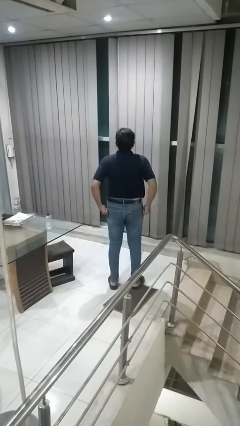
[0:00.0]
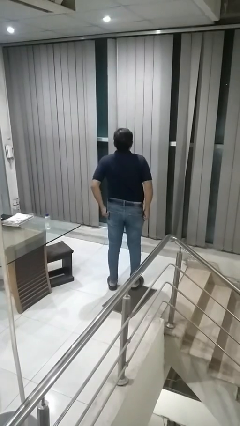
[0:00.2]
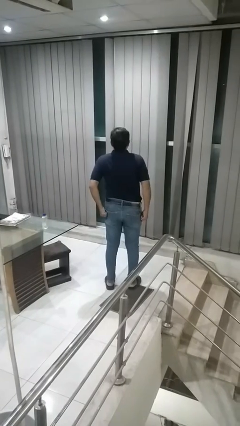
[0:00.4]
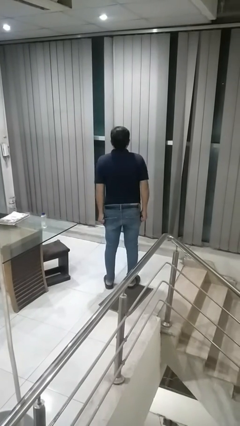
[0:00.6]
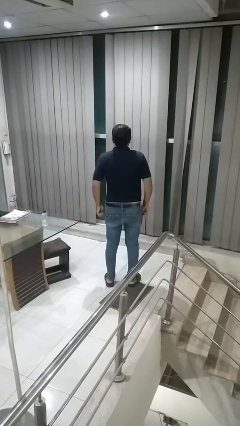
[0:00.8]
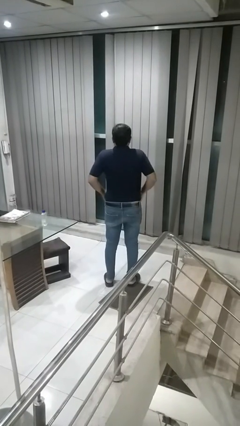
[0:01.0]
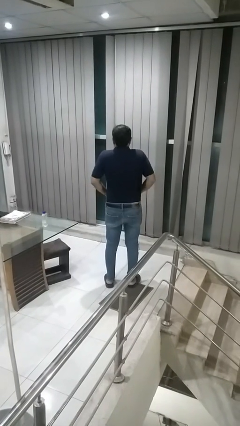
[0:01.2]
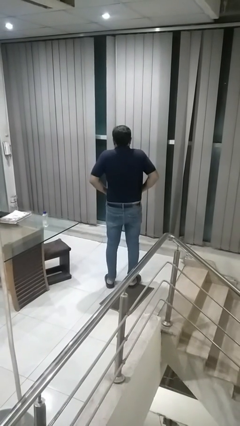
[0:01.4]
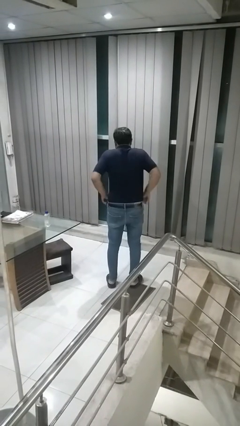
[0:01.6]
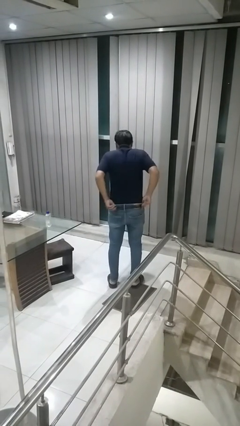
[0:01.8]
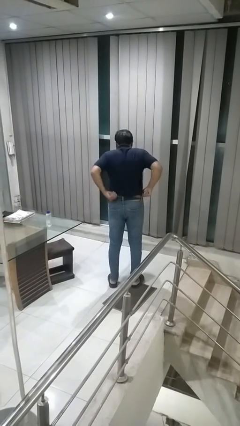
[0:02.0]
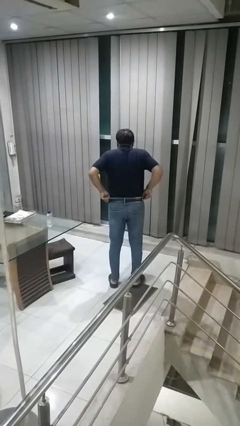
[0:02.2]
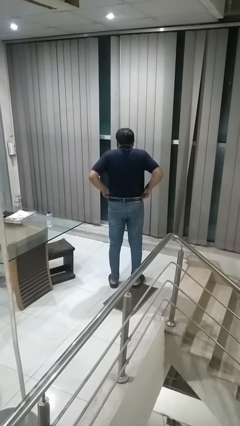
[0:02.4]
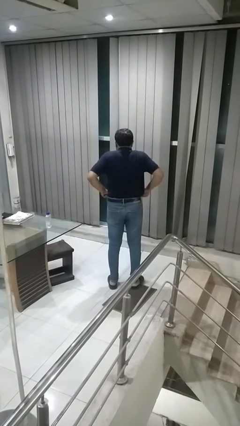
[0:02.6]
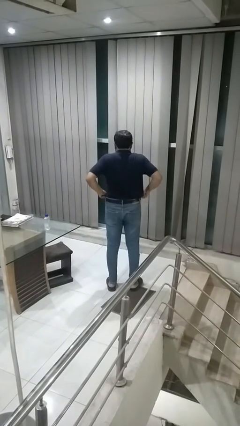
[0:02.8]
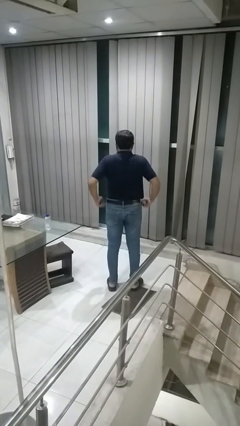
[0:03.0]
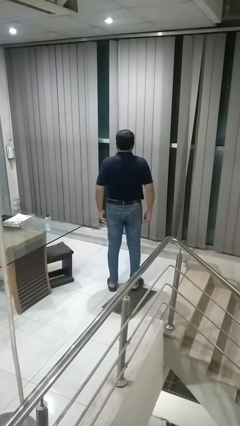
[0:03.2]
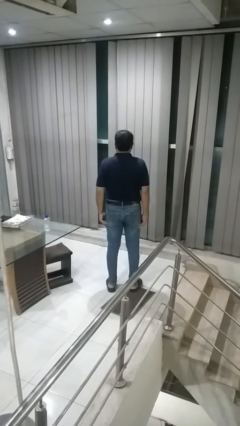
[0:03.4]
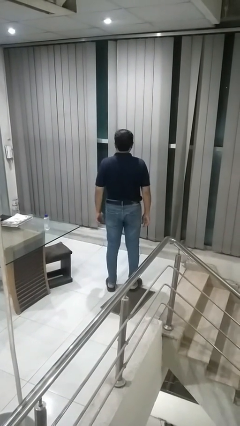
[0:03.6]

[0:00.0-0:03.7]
person hikes up pants

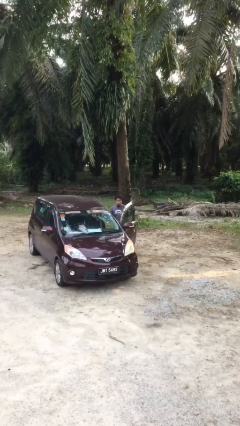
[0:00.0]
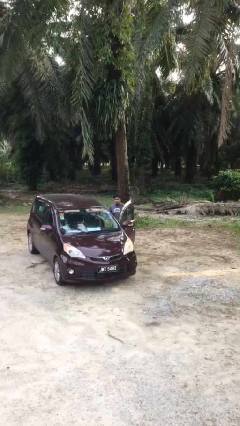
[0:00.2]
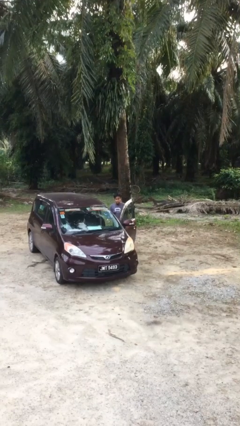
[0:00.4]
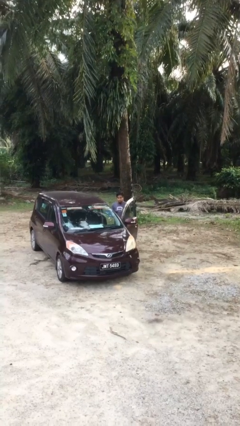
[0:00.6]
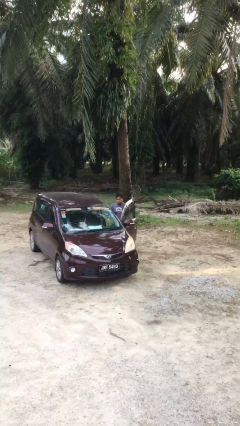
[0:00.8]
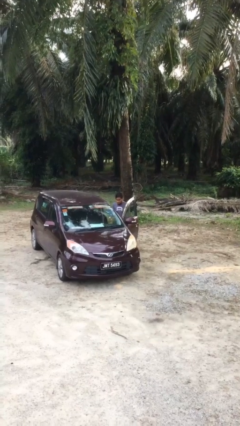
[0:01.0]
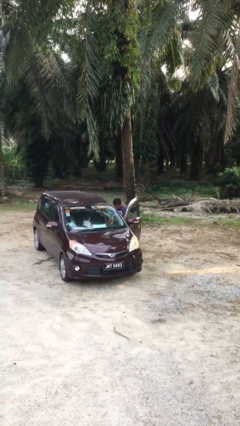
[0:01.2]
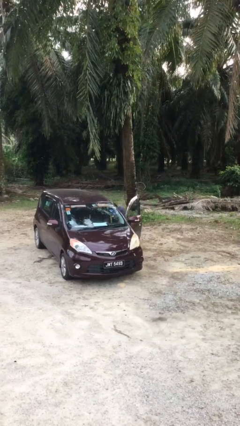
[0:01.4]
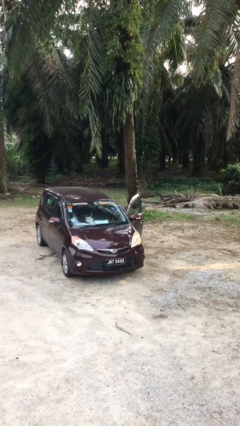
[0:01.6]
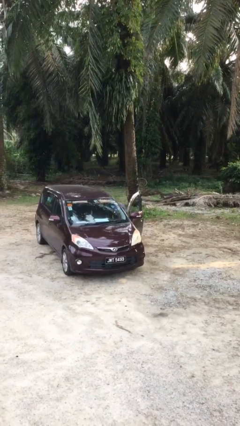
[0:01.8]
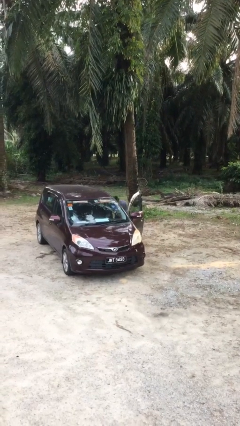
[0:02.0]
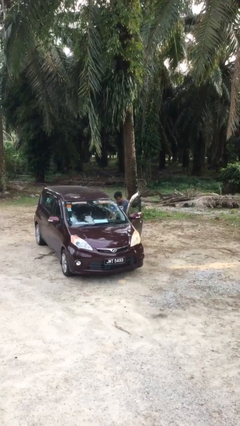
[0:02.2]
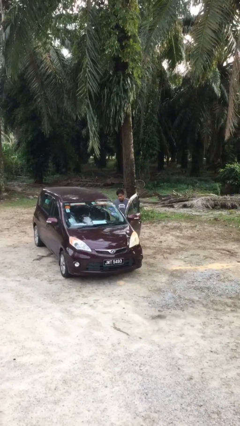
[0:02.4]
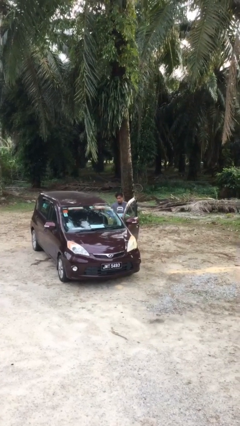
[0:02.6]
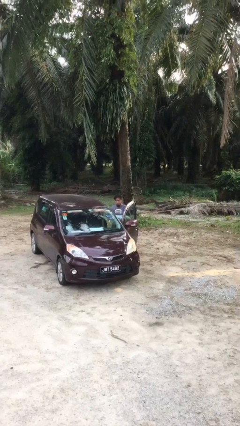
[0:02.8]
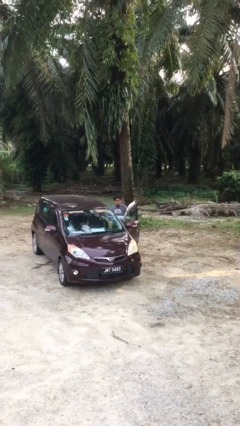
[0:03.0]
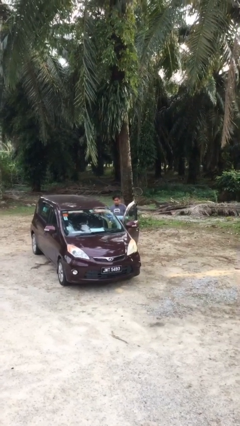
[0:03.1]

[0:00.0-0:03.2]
person unloads car

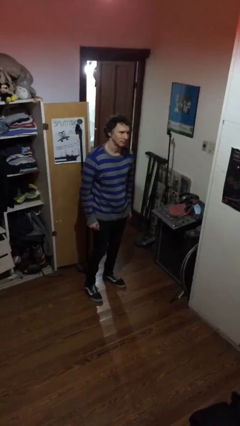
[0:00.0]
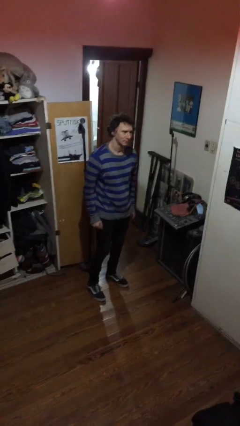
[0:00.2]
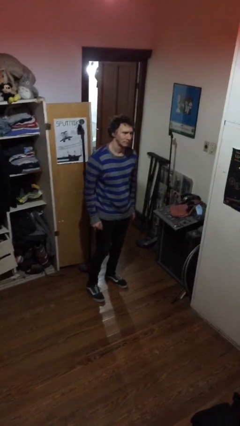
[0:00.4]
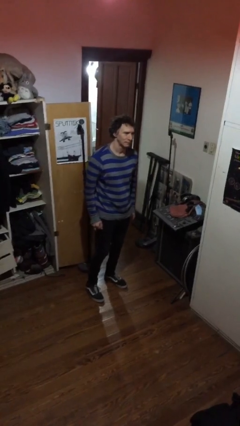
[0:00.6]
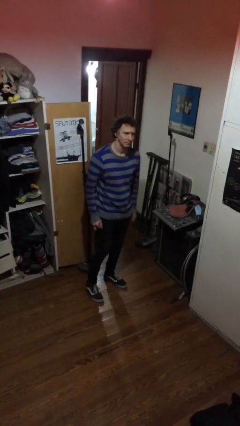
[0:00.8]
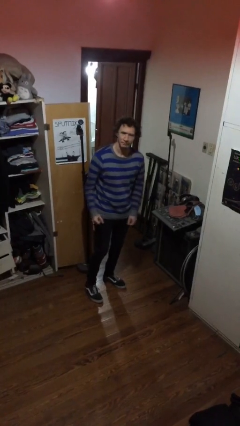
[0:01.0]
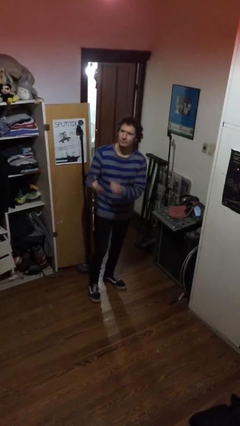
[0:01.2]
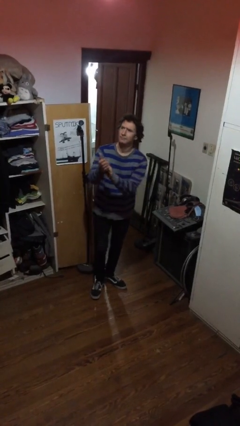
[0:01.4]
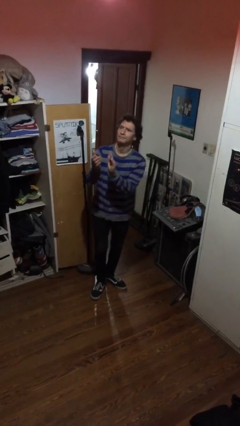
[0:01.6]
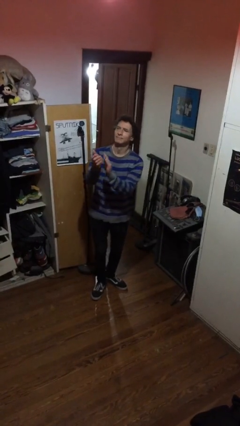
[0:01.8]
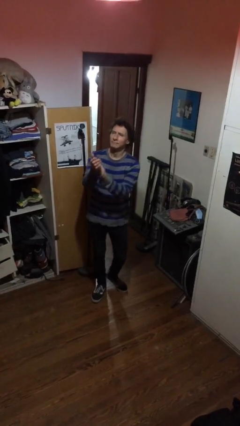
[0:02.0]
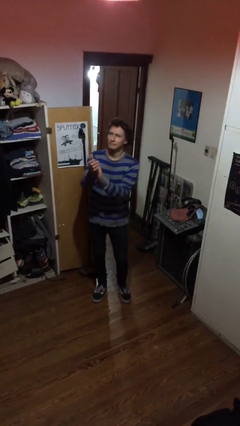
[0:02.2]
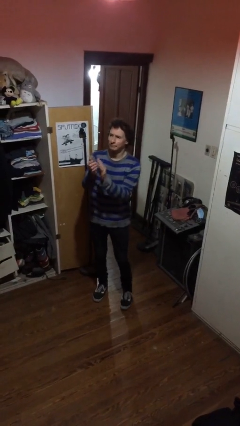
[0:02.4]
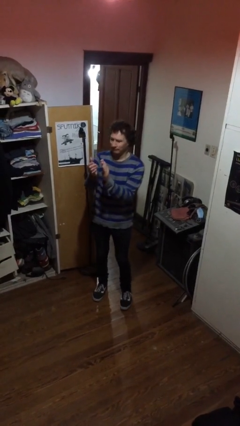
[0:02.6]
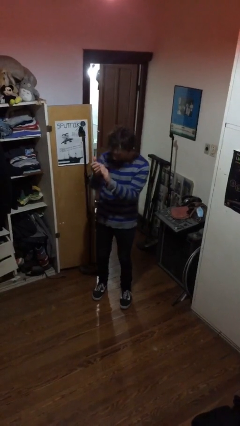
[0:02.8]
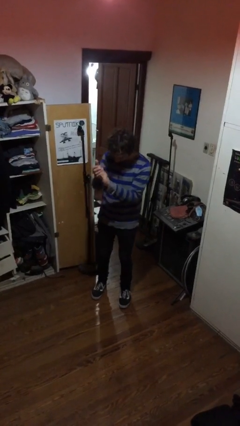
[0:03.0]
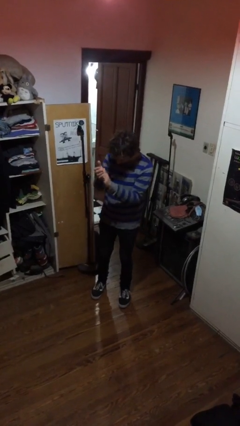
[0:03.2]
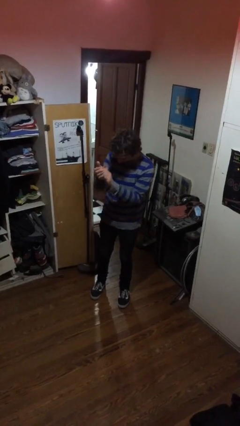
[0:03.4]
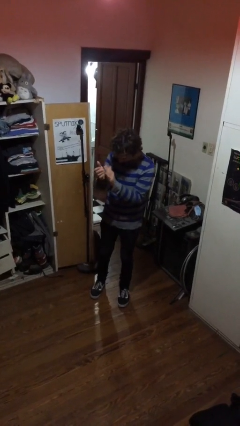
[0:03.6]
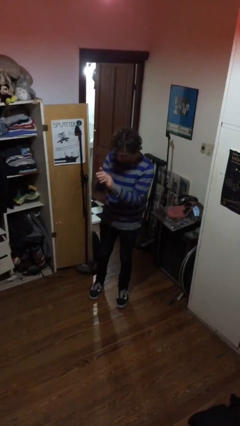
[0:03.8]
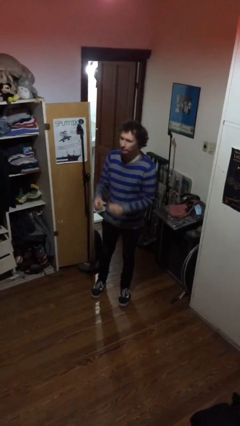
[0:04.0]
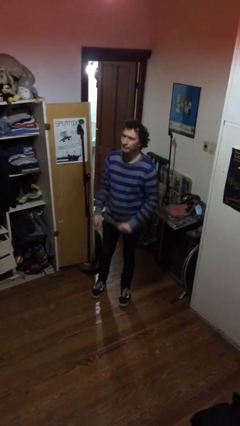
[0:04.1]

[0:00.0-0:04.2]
person claps hands

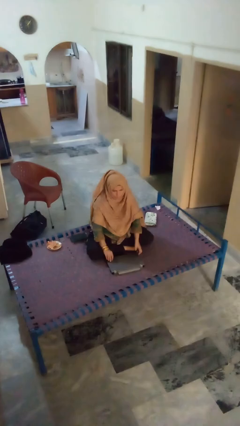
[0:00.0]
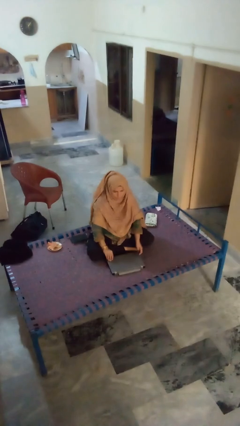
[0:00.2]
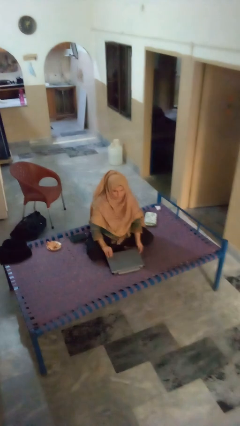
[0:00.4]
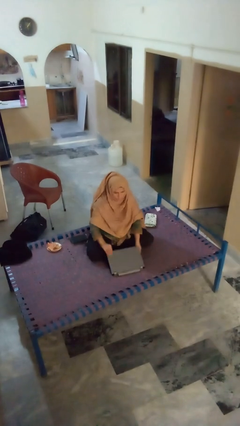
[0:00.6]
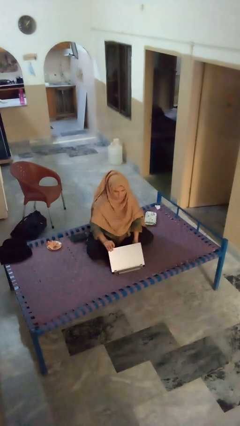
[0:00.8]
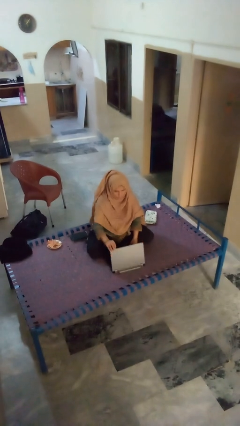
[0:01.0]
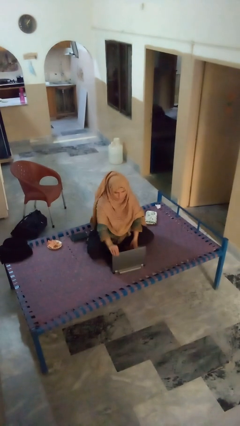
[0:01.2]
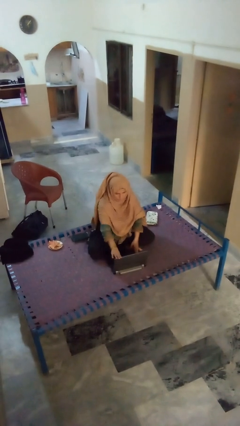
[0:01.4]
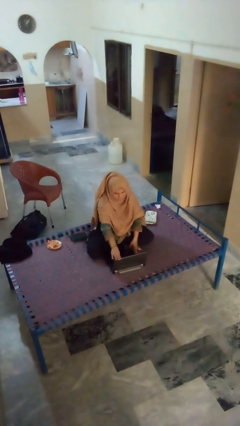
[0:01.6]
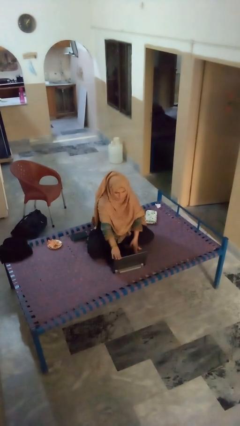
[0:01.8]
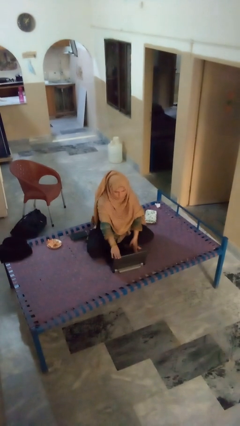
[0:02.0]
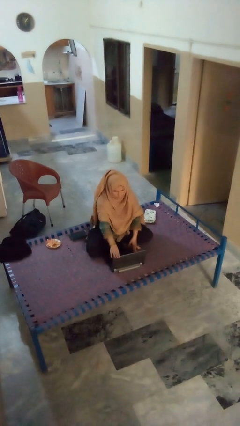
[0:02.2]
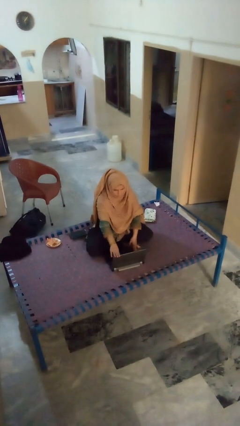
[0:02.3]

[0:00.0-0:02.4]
person opens laptop

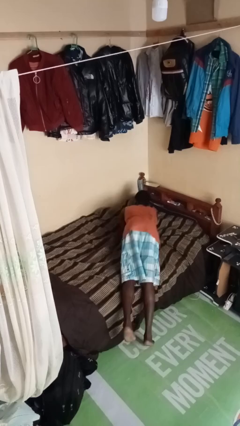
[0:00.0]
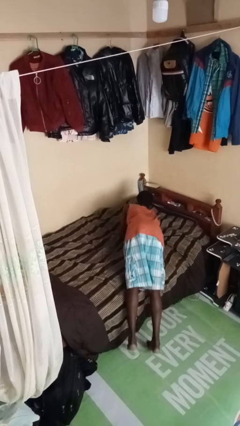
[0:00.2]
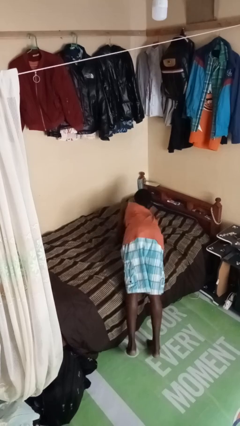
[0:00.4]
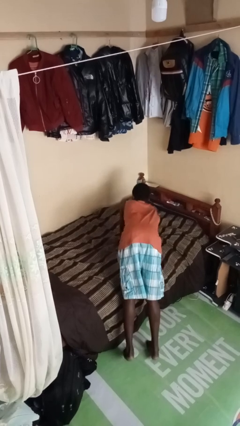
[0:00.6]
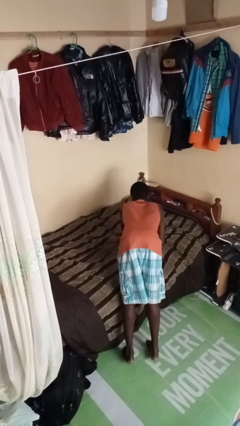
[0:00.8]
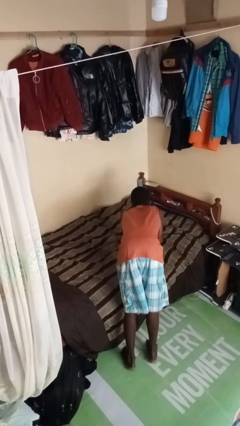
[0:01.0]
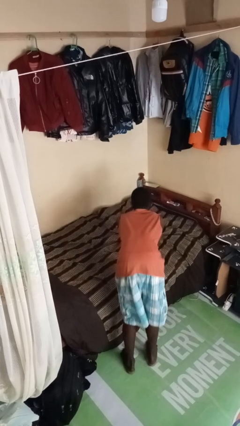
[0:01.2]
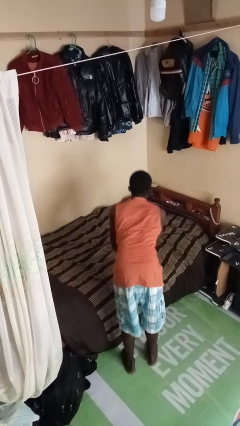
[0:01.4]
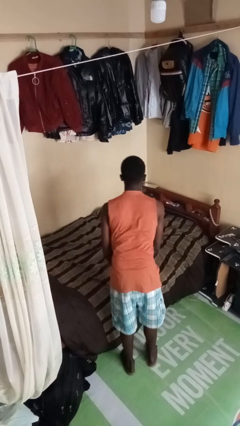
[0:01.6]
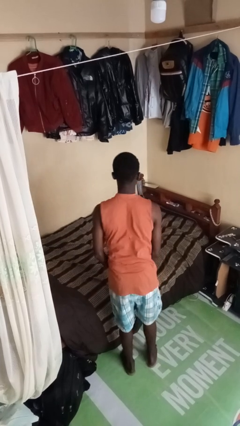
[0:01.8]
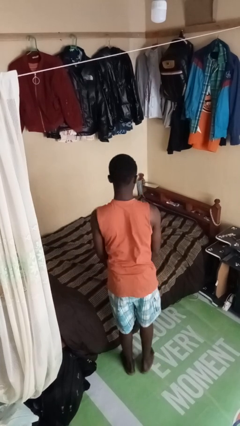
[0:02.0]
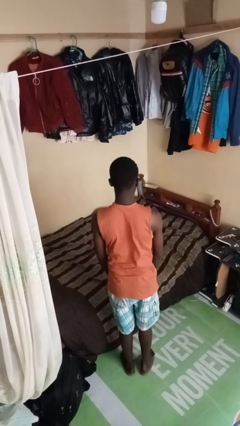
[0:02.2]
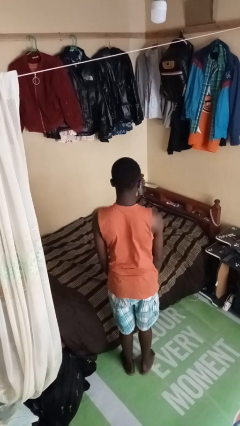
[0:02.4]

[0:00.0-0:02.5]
person stands up

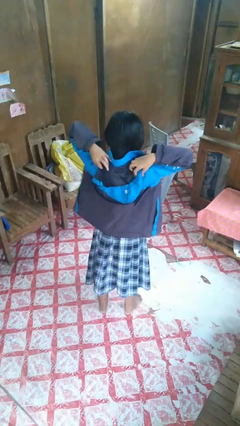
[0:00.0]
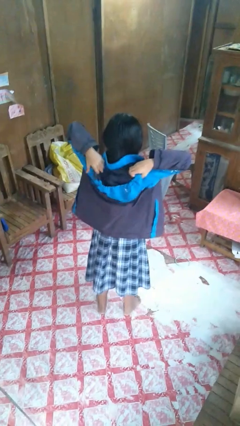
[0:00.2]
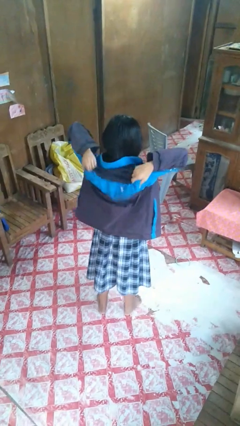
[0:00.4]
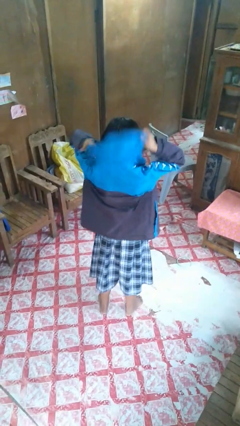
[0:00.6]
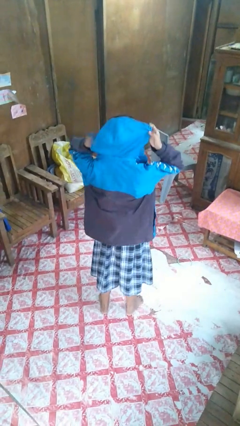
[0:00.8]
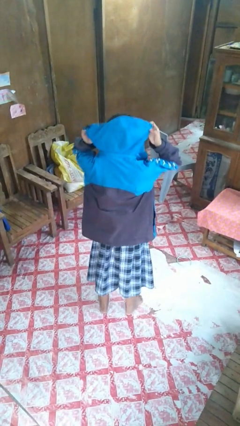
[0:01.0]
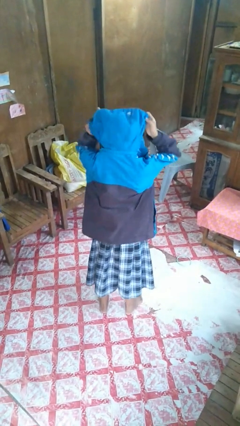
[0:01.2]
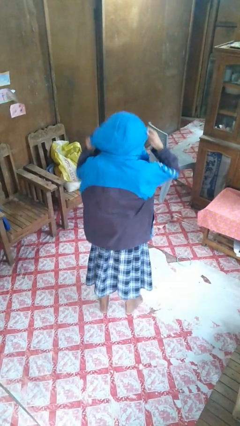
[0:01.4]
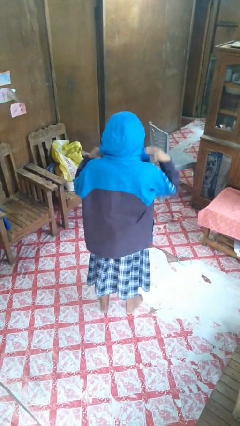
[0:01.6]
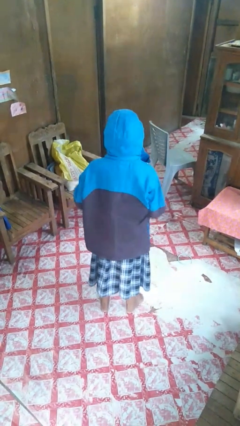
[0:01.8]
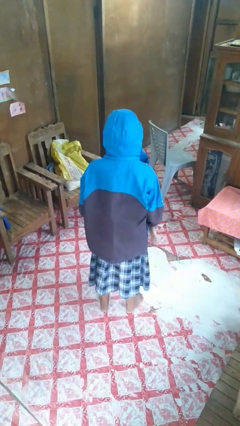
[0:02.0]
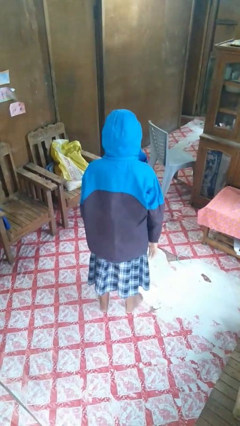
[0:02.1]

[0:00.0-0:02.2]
person puts on hoodie
